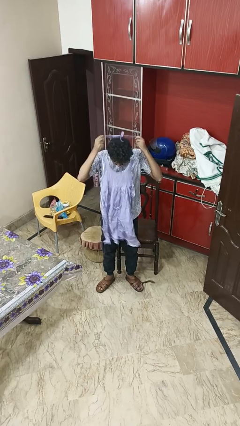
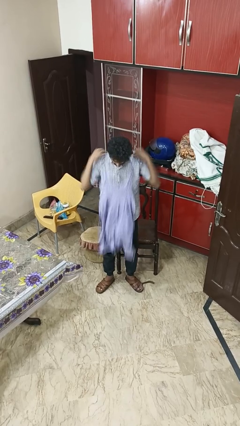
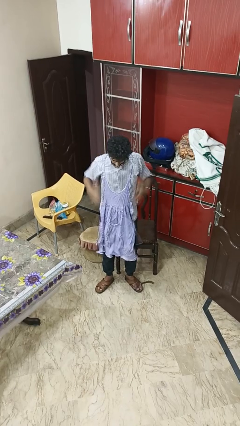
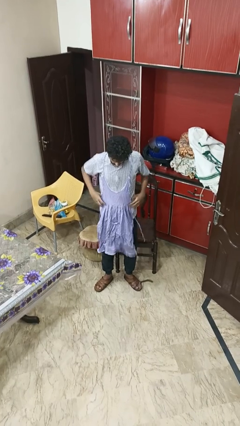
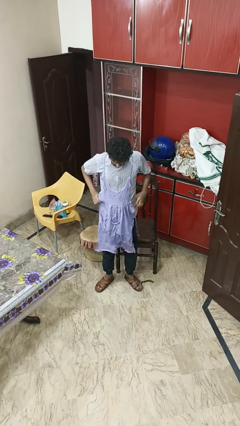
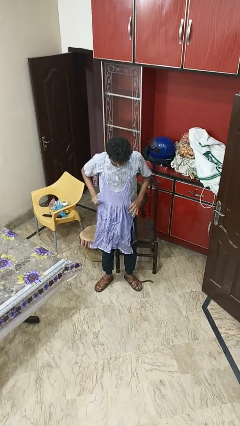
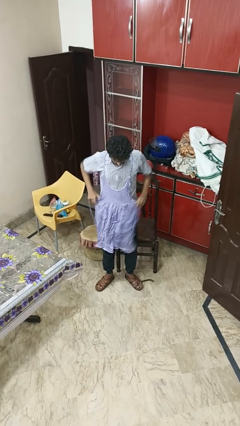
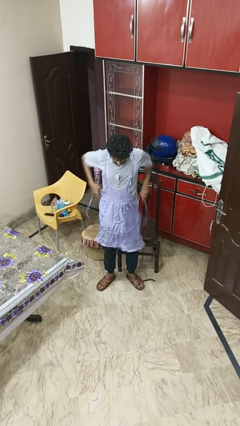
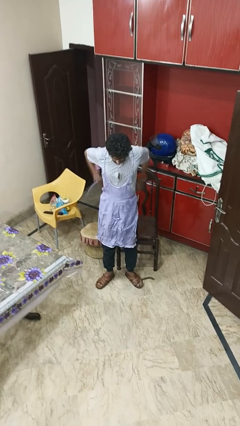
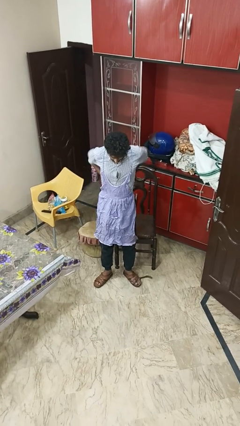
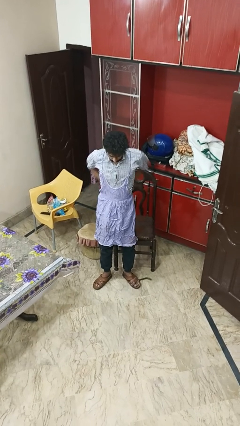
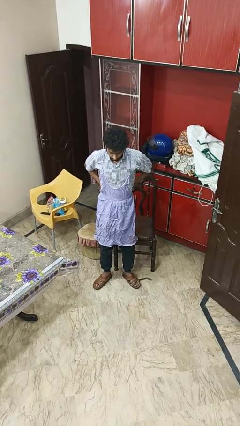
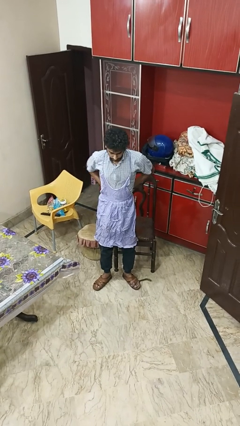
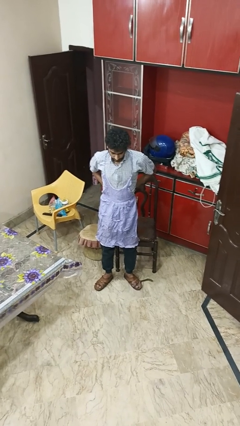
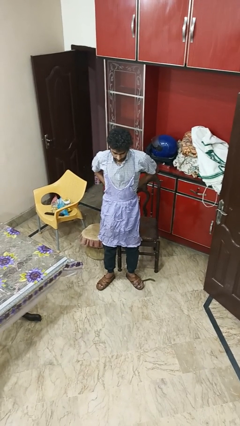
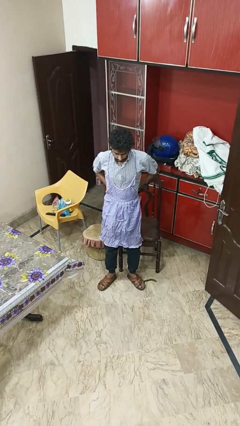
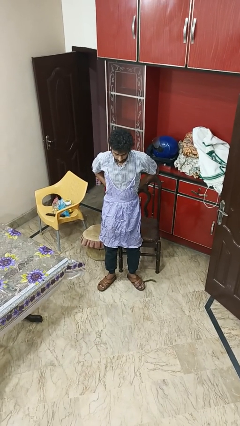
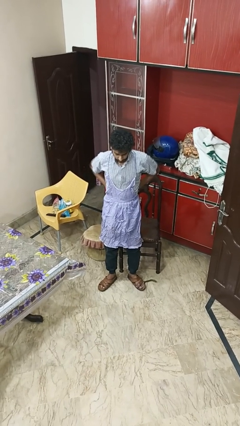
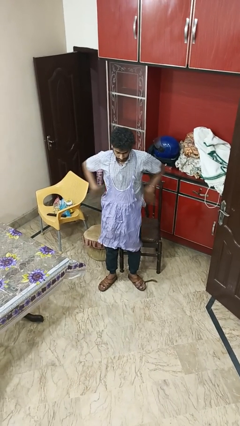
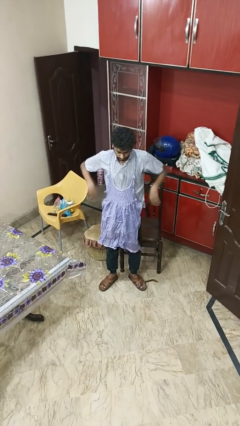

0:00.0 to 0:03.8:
person puts on apron

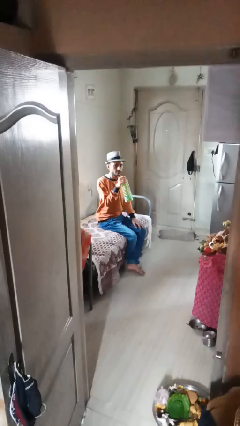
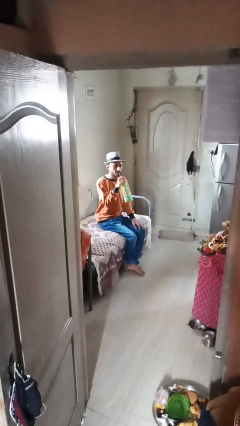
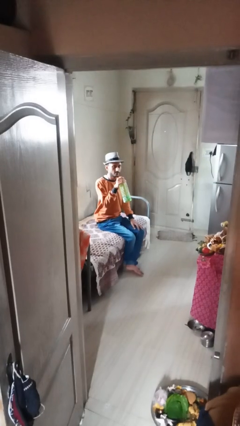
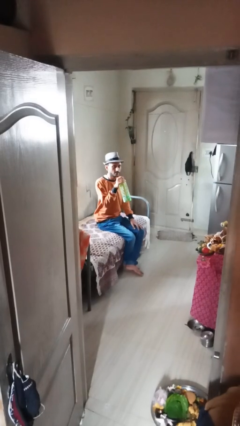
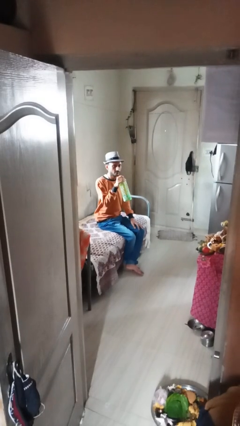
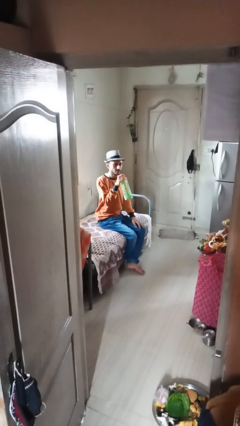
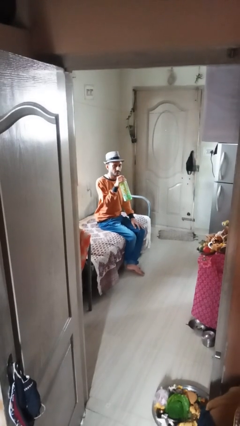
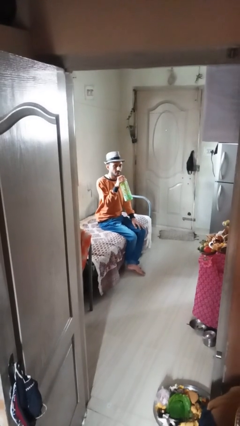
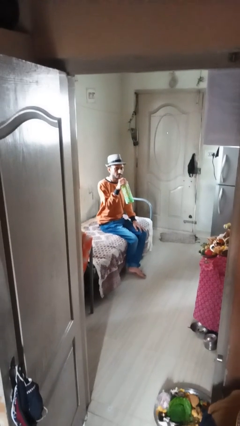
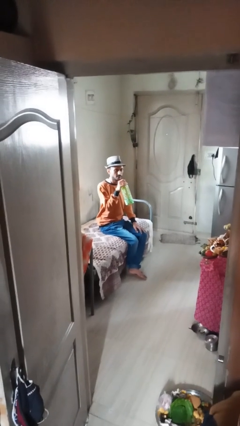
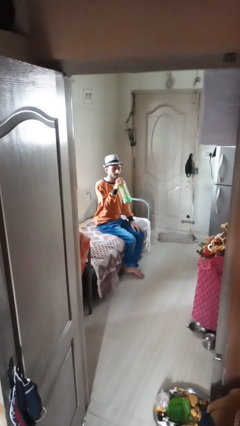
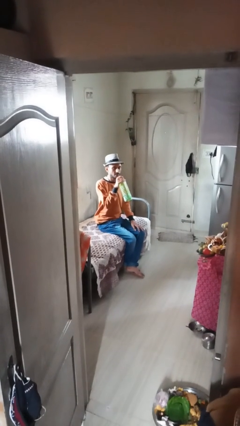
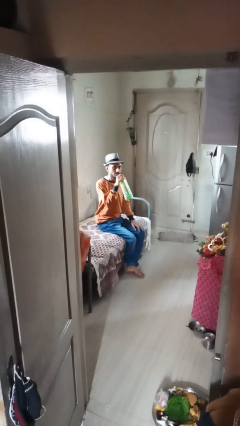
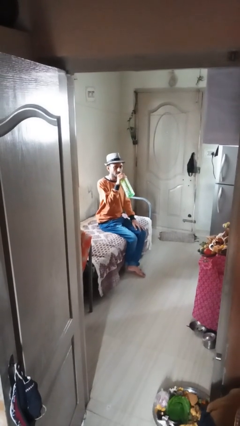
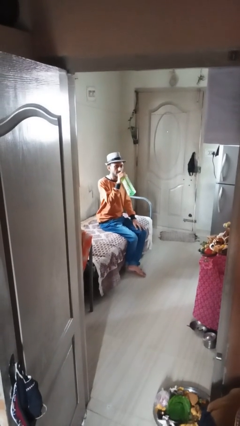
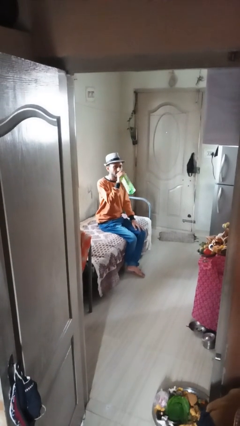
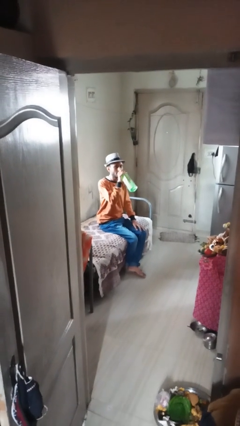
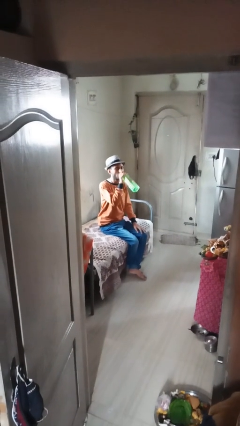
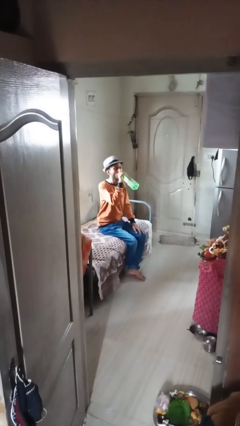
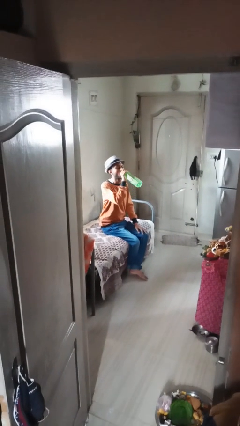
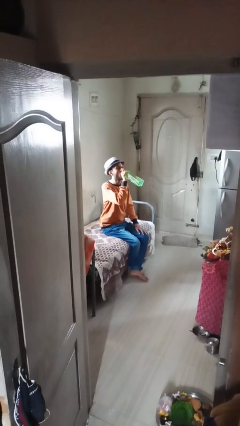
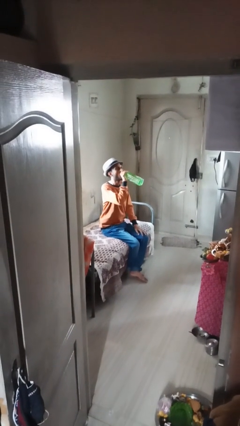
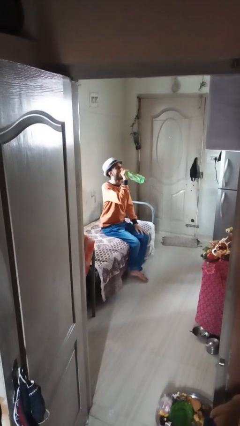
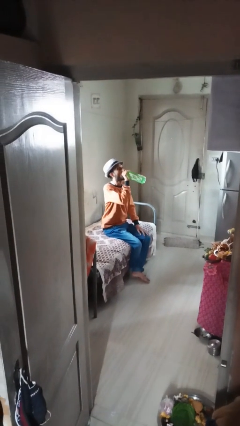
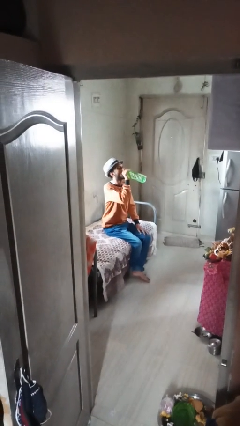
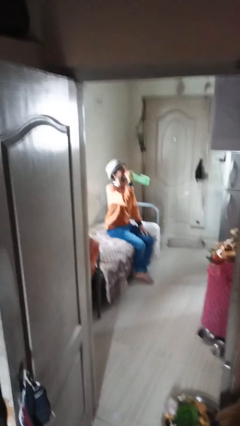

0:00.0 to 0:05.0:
person drinks from bottle

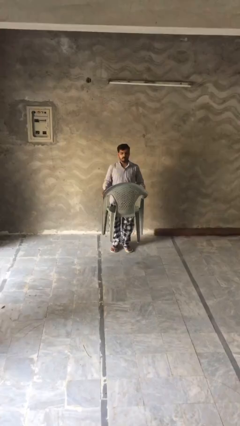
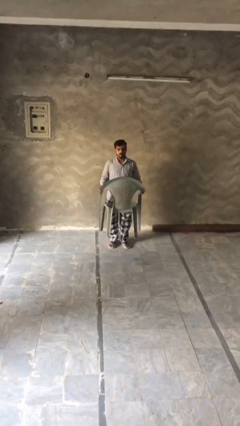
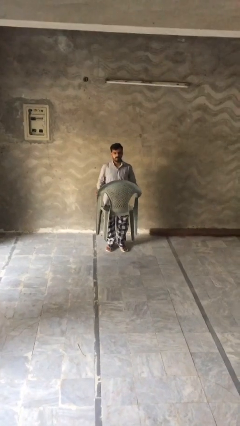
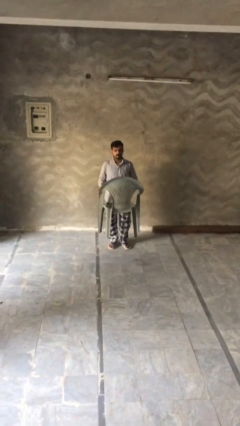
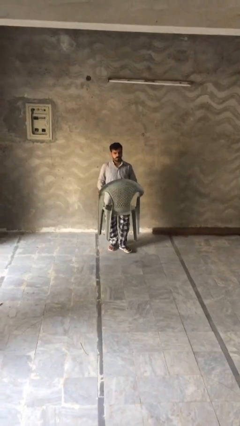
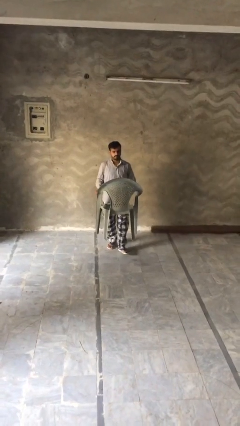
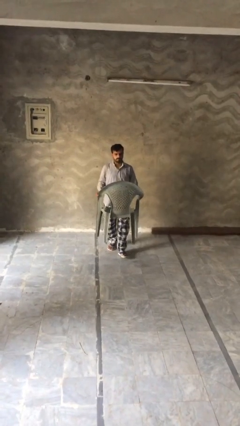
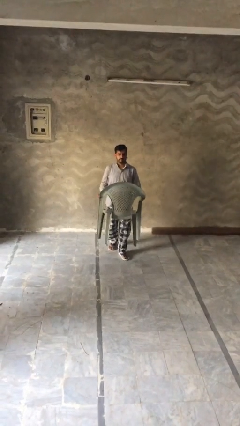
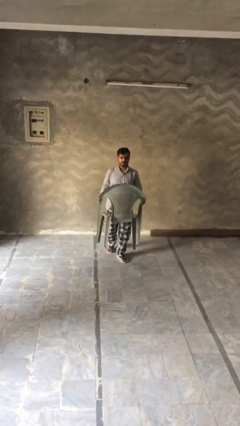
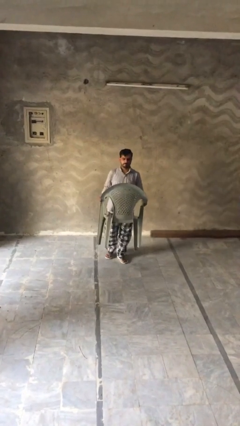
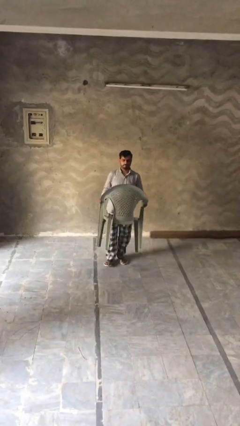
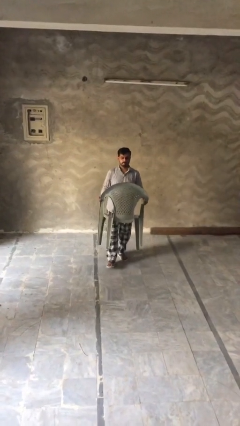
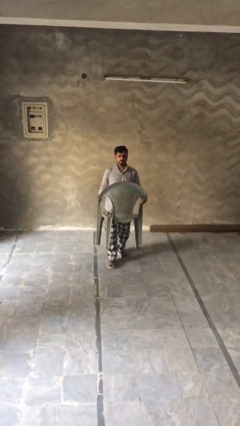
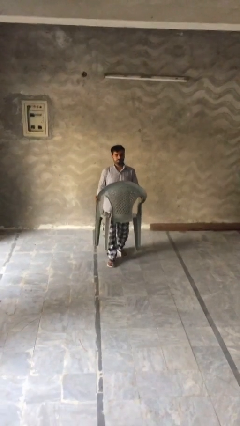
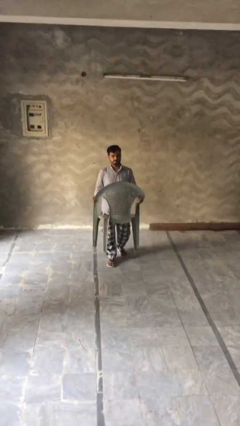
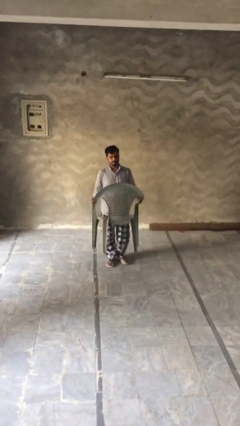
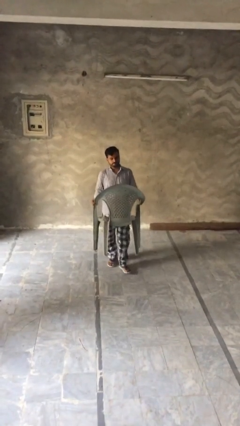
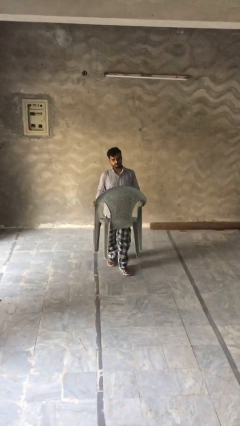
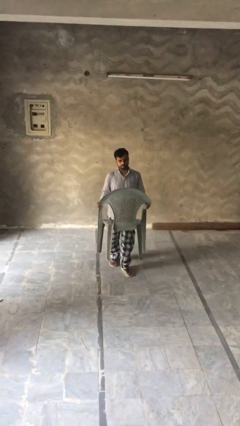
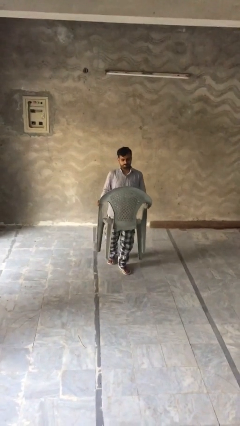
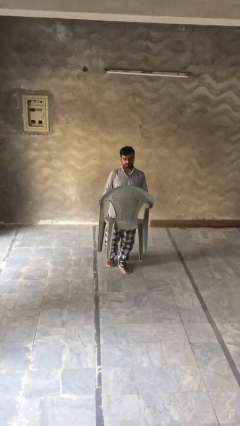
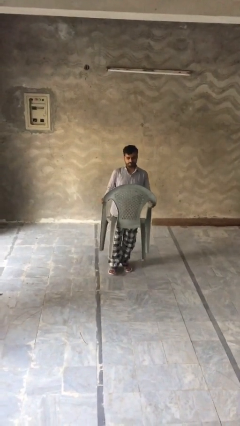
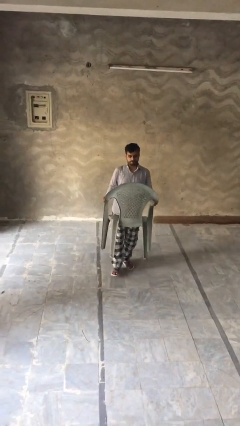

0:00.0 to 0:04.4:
person carries heavy object

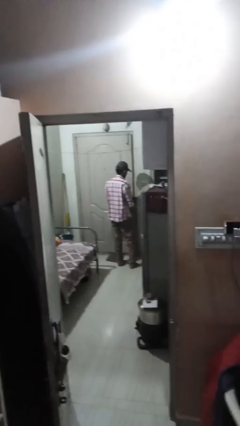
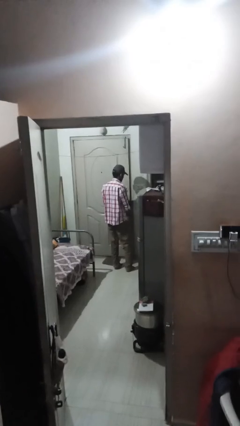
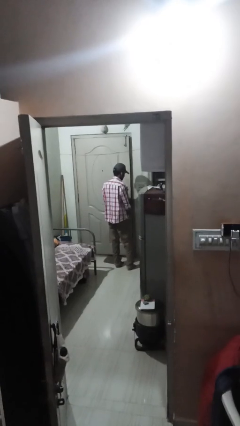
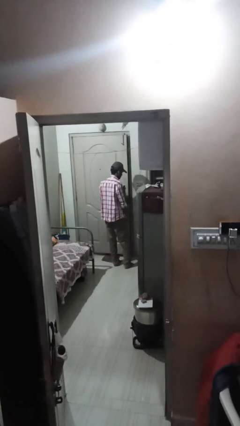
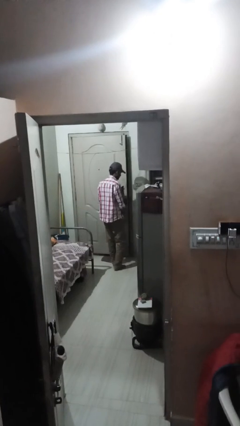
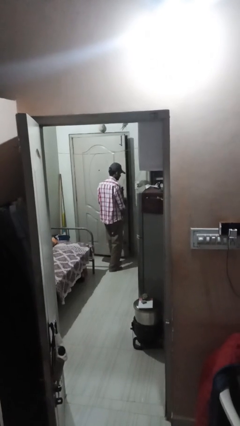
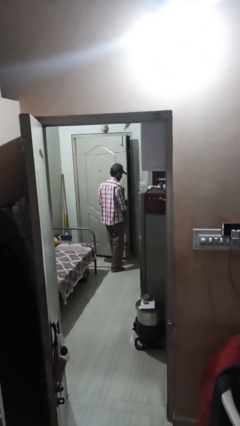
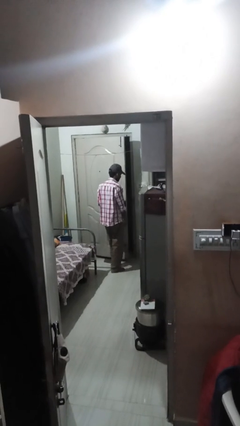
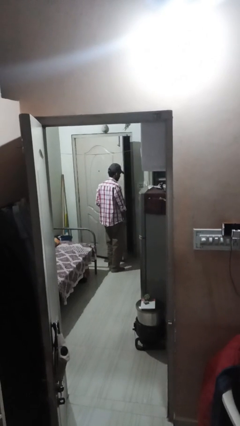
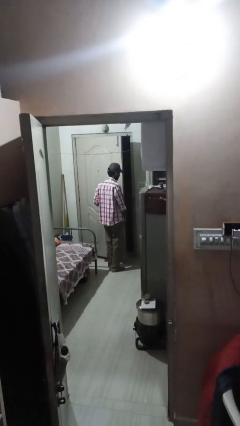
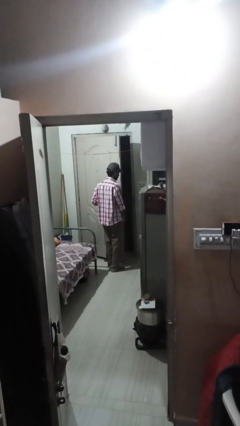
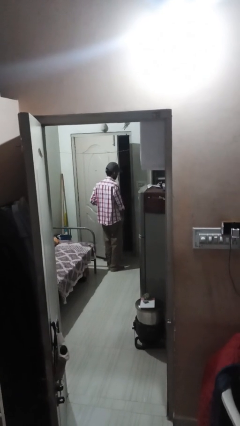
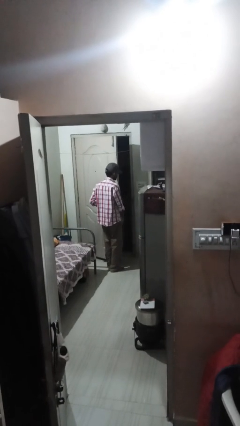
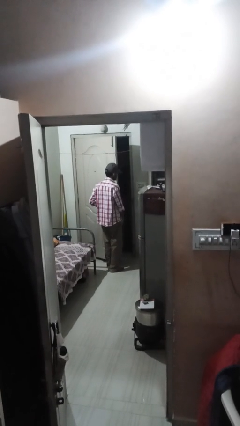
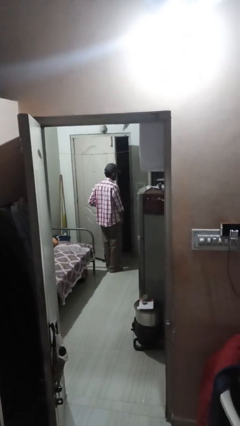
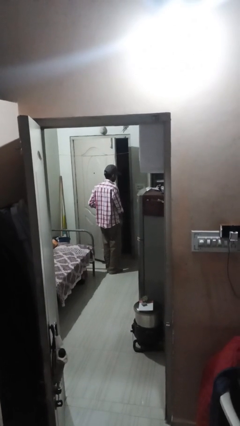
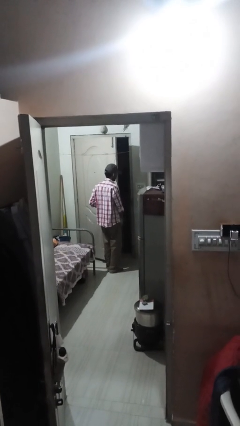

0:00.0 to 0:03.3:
person opens facility door

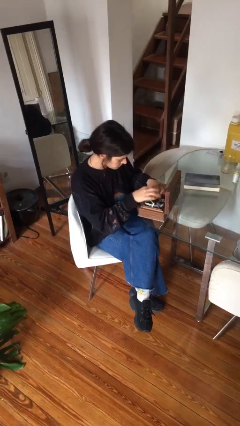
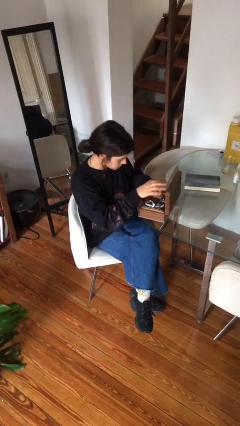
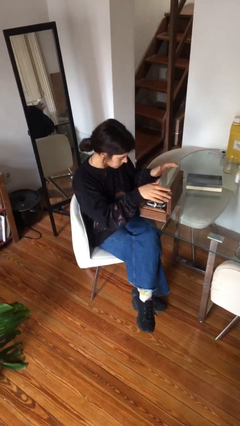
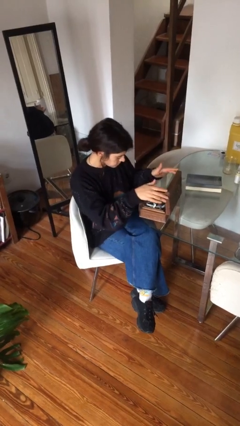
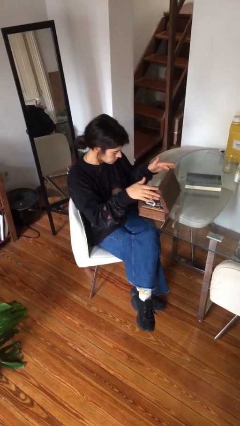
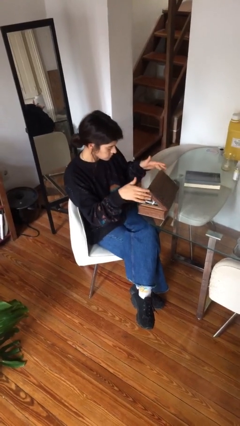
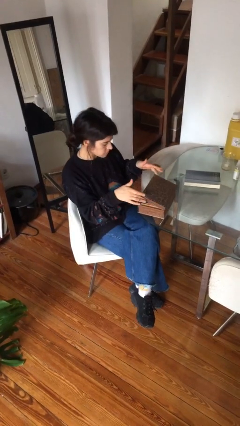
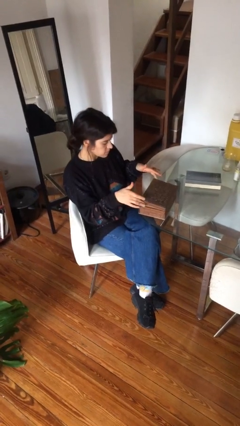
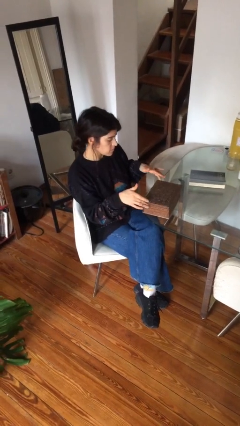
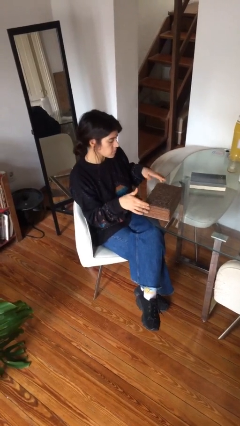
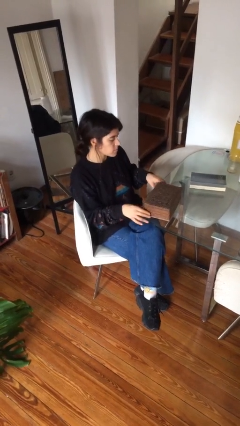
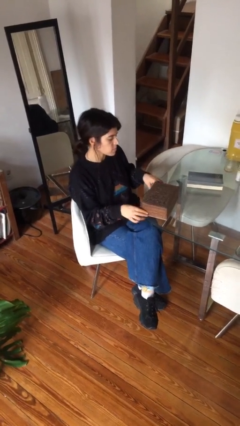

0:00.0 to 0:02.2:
person closes jewelry box
